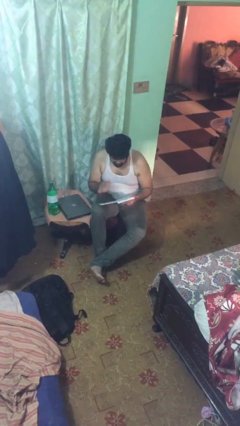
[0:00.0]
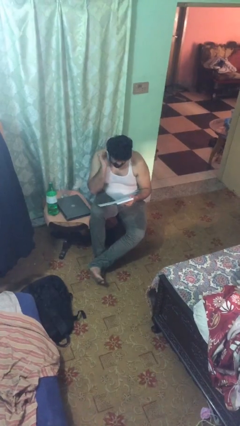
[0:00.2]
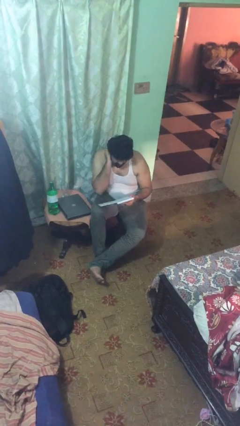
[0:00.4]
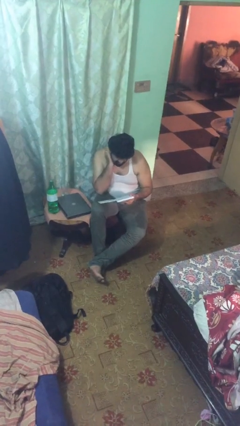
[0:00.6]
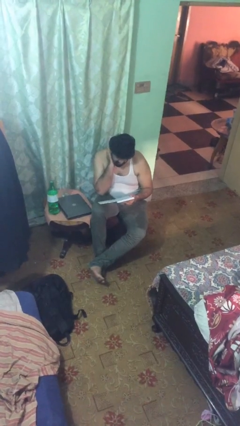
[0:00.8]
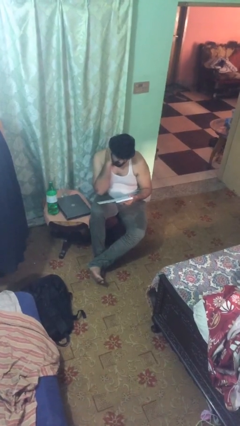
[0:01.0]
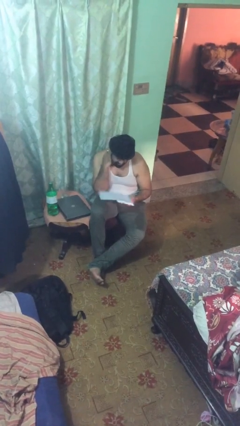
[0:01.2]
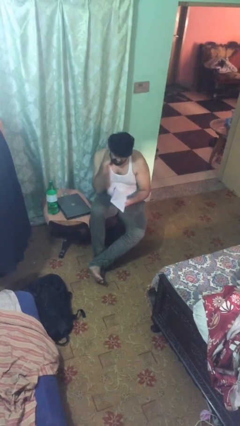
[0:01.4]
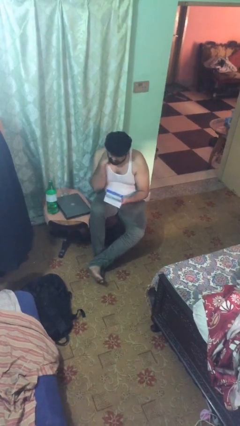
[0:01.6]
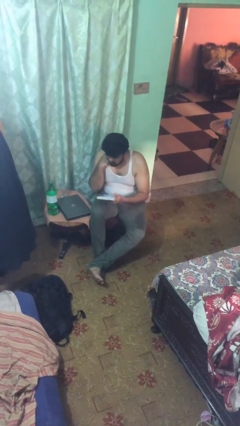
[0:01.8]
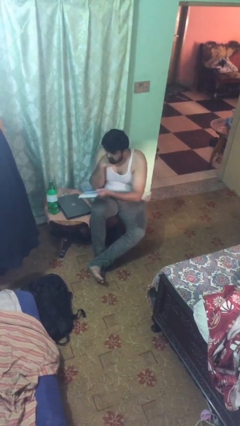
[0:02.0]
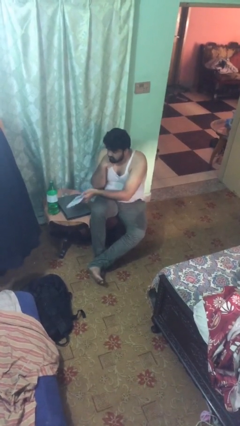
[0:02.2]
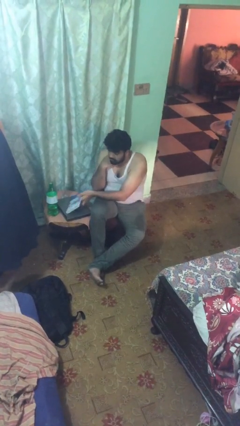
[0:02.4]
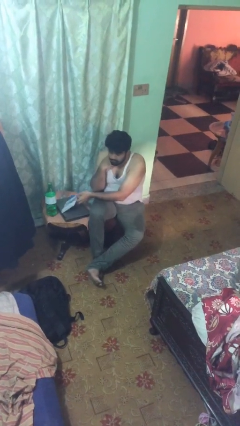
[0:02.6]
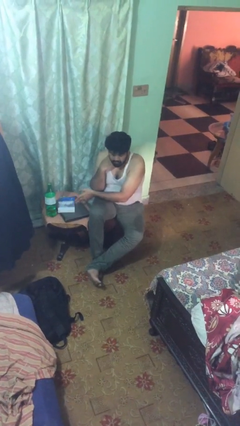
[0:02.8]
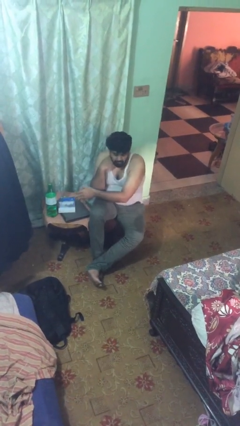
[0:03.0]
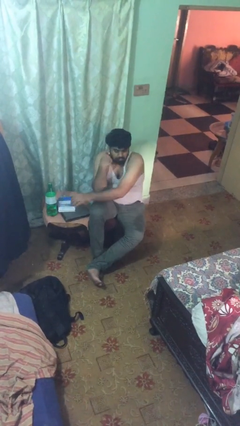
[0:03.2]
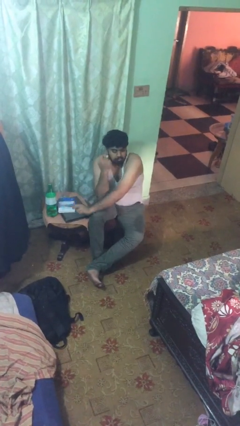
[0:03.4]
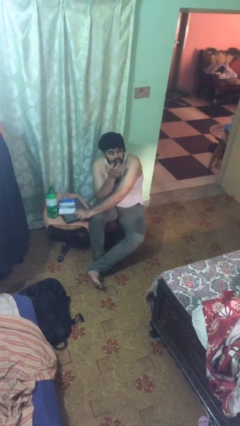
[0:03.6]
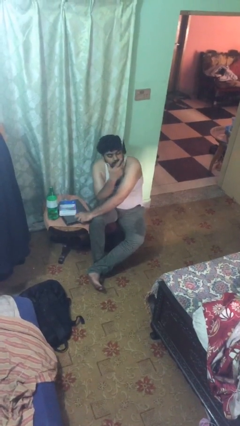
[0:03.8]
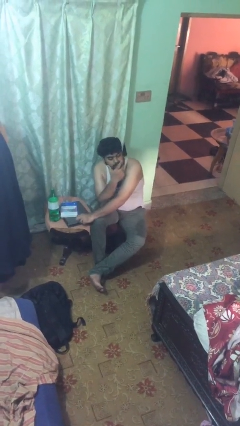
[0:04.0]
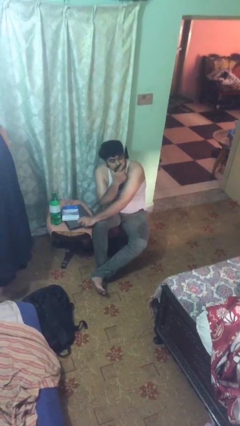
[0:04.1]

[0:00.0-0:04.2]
person puts down object on table

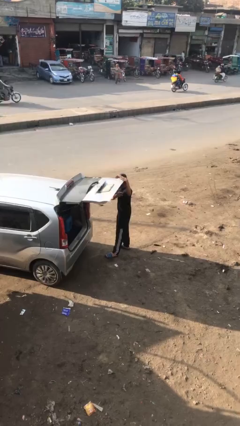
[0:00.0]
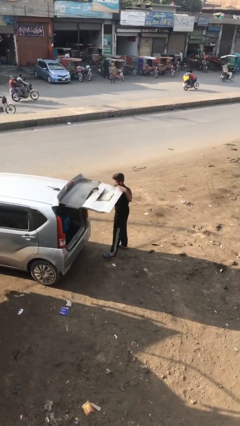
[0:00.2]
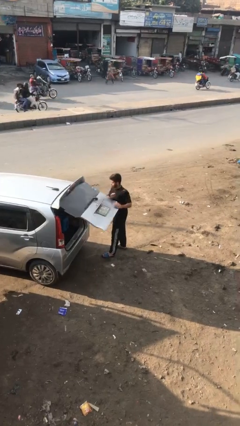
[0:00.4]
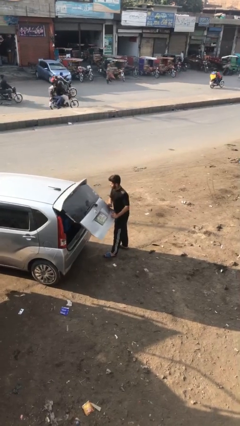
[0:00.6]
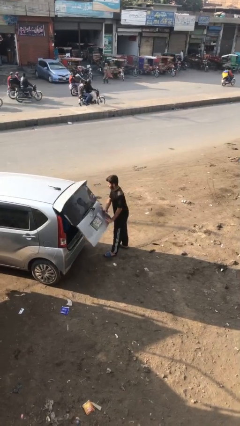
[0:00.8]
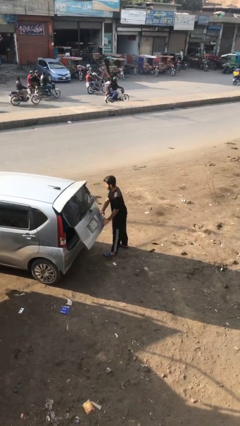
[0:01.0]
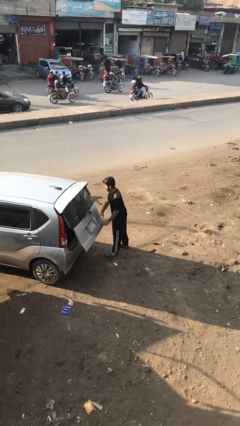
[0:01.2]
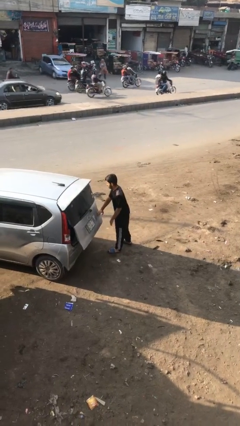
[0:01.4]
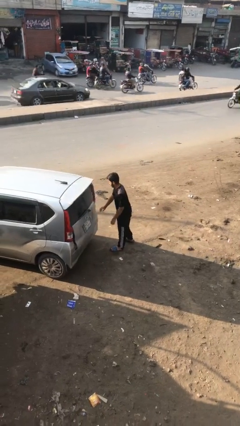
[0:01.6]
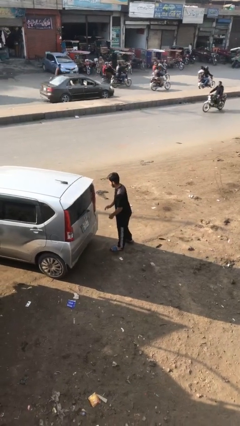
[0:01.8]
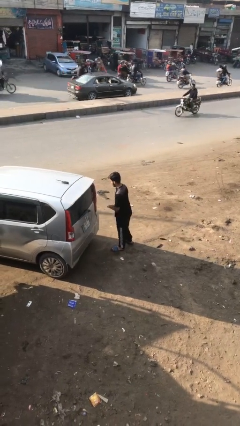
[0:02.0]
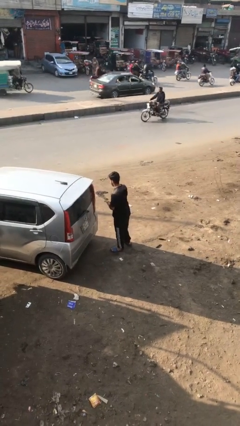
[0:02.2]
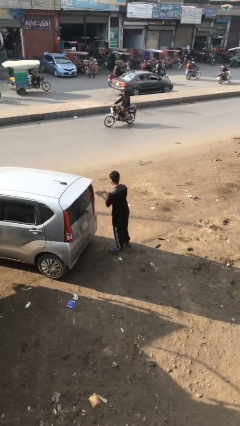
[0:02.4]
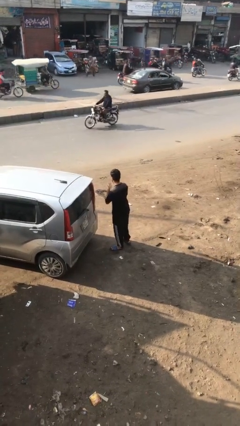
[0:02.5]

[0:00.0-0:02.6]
person closes car trunk

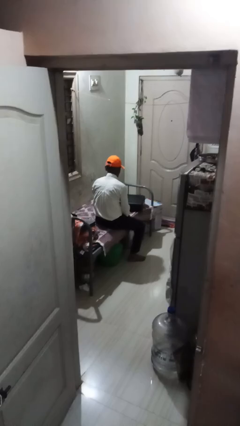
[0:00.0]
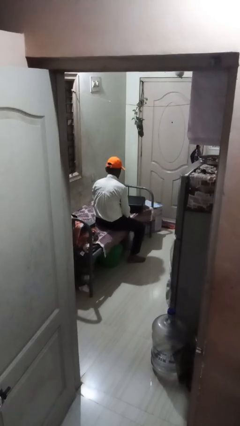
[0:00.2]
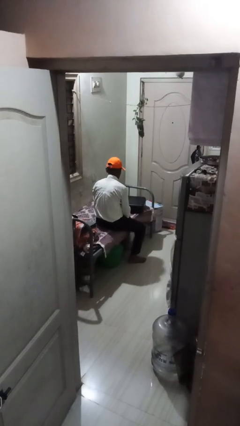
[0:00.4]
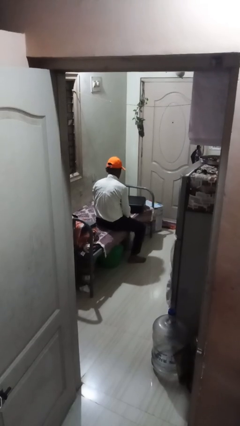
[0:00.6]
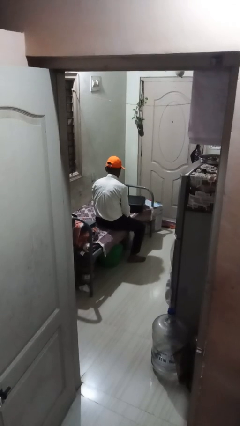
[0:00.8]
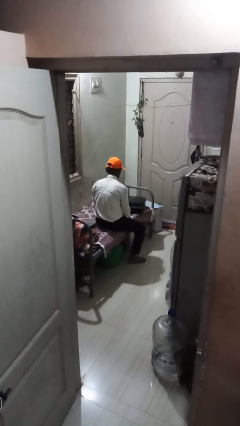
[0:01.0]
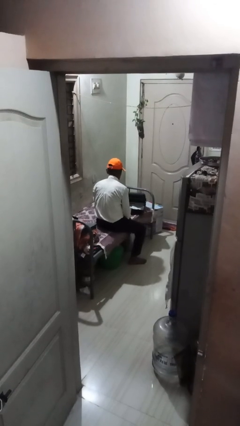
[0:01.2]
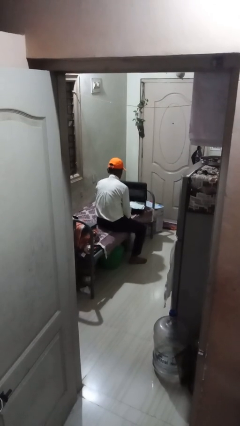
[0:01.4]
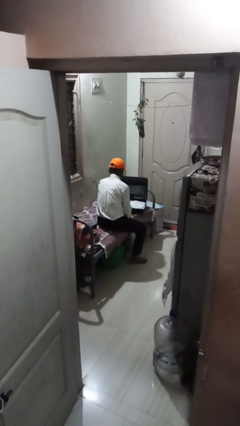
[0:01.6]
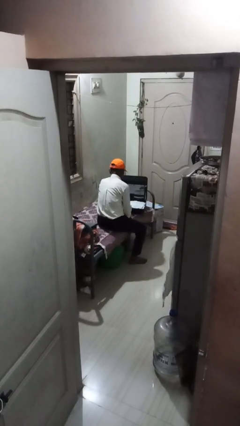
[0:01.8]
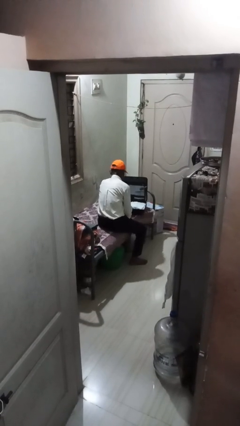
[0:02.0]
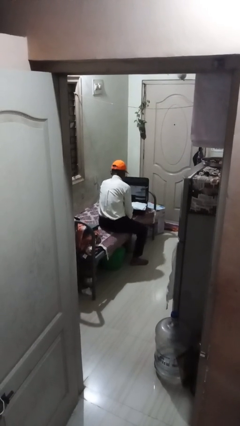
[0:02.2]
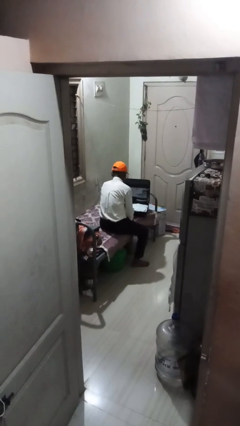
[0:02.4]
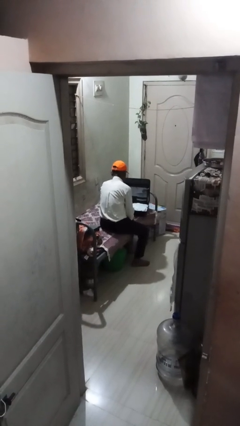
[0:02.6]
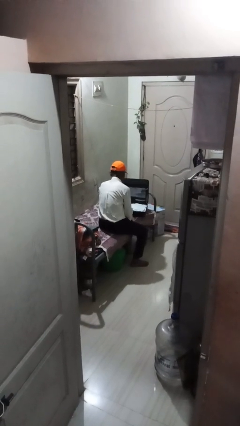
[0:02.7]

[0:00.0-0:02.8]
person opens suitcase

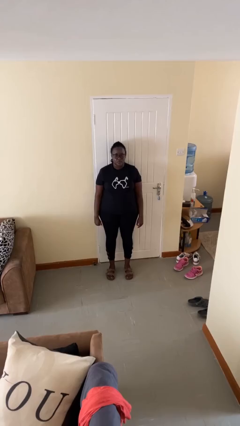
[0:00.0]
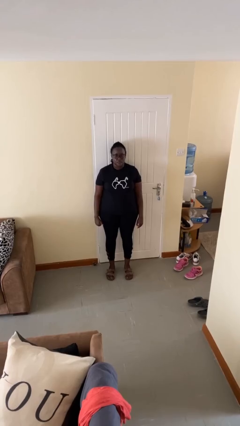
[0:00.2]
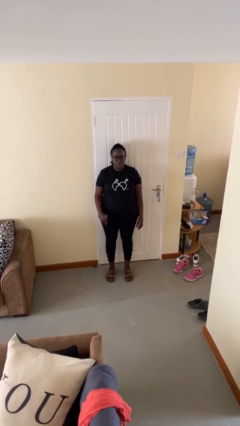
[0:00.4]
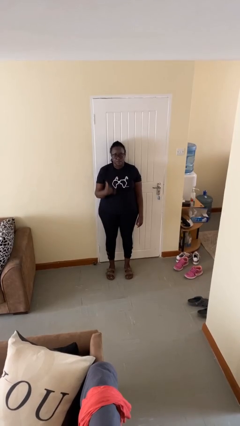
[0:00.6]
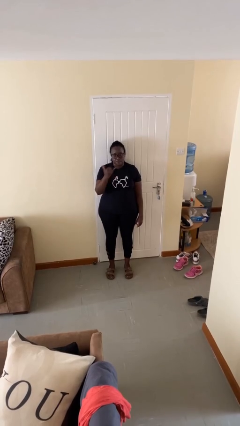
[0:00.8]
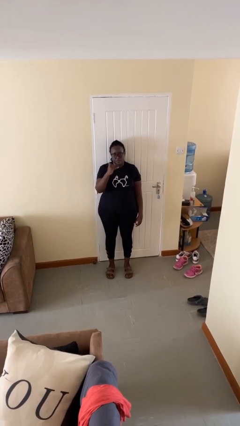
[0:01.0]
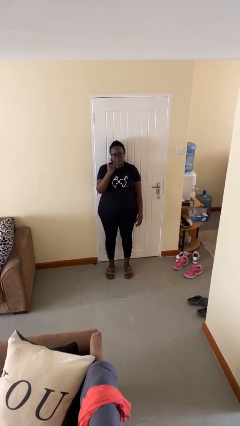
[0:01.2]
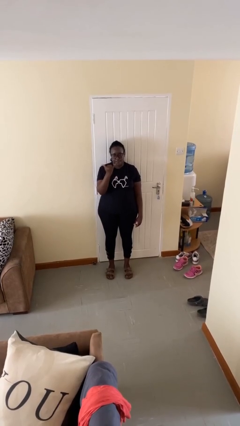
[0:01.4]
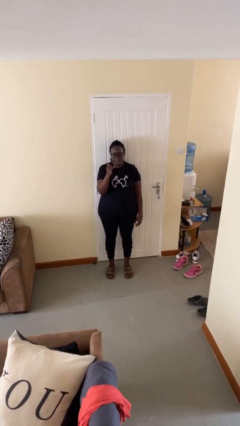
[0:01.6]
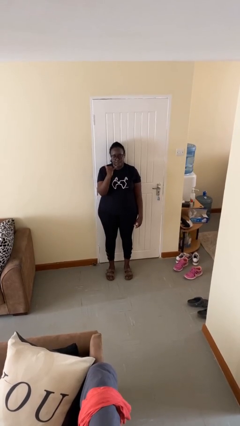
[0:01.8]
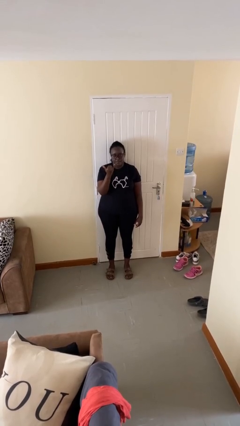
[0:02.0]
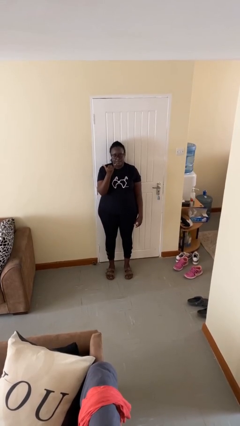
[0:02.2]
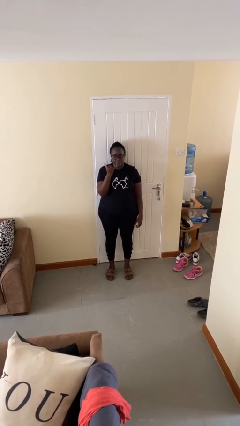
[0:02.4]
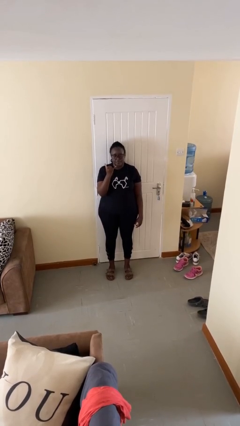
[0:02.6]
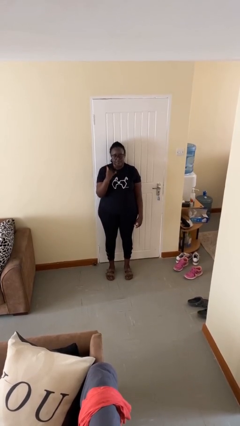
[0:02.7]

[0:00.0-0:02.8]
person gestures hang loose

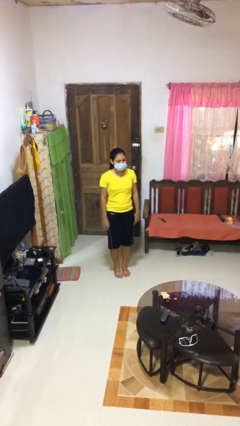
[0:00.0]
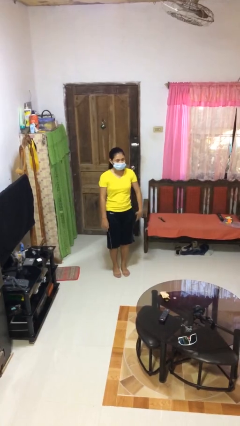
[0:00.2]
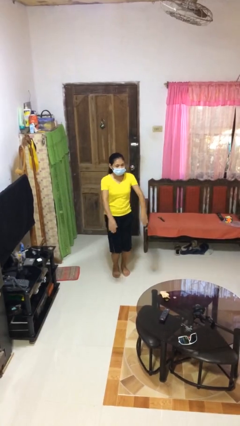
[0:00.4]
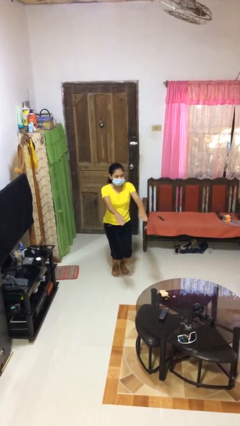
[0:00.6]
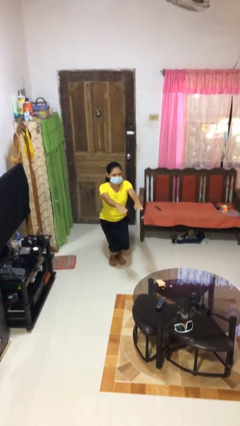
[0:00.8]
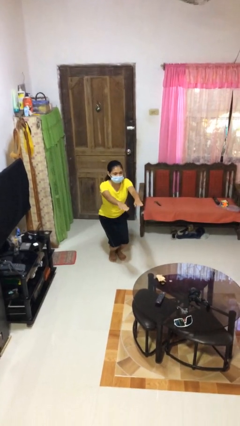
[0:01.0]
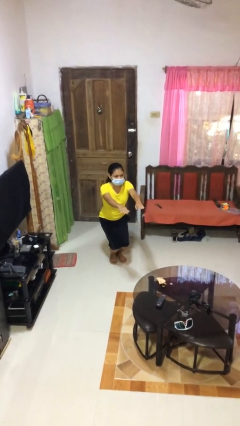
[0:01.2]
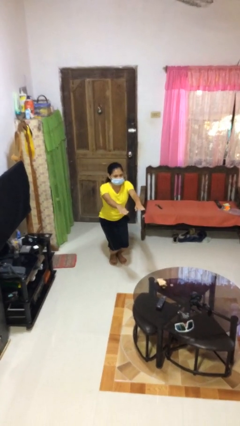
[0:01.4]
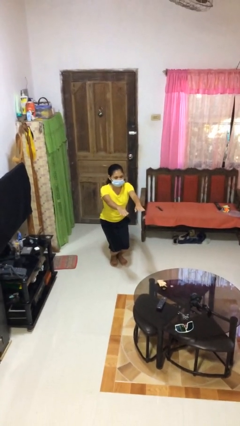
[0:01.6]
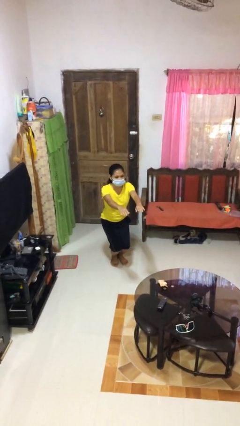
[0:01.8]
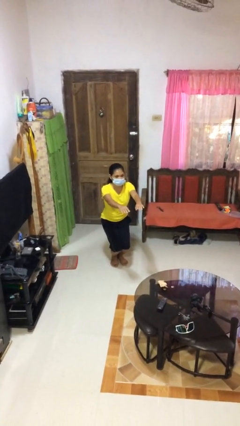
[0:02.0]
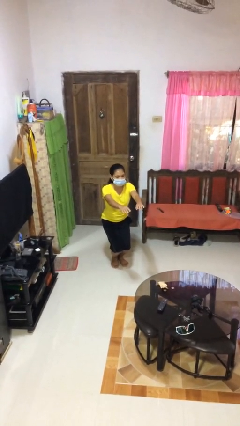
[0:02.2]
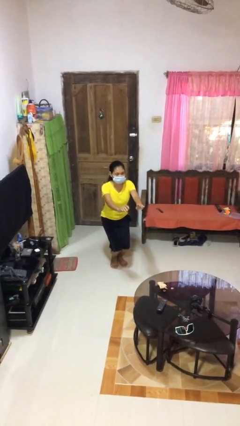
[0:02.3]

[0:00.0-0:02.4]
person squats

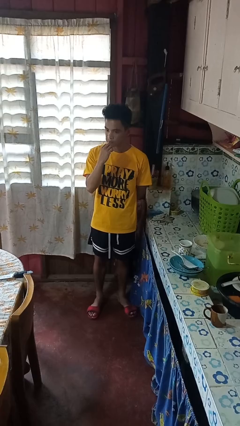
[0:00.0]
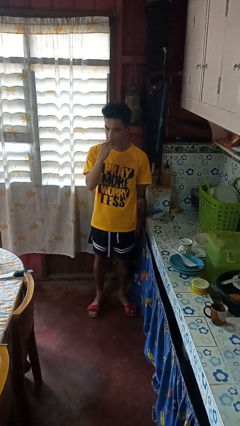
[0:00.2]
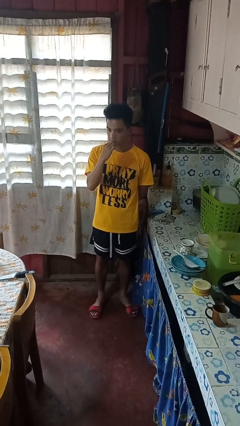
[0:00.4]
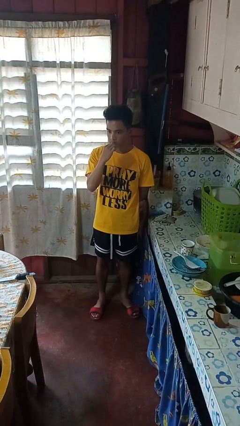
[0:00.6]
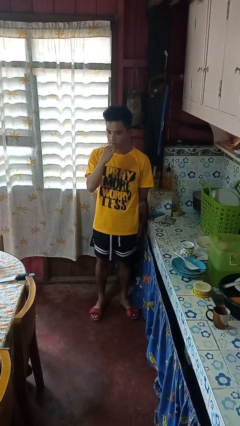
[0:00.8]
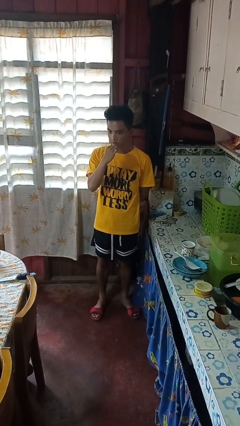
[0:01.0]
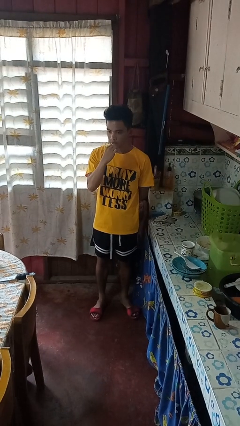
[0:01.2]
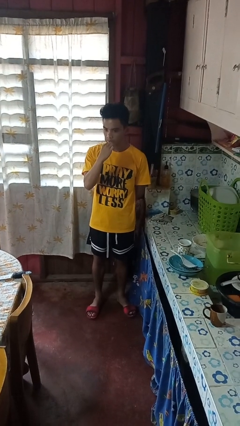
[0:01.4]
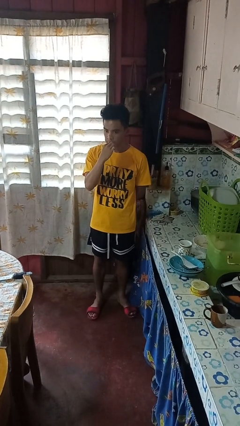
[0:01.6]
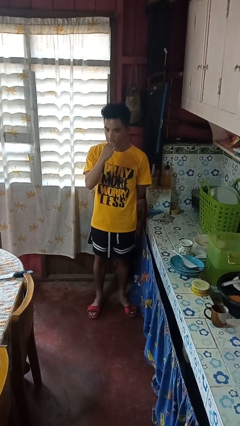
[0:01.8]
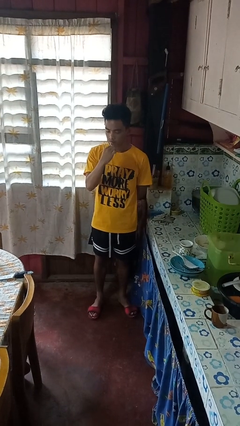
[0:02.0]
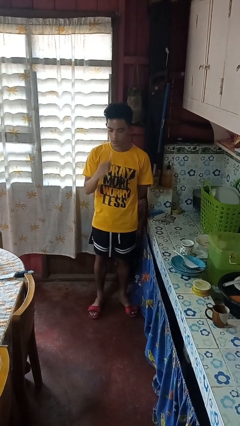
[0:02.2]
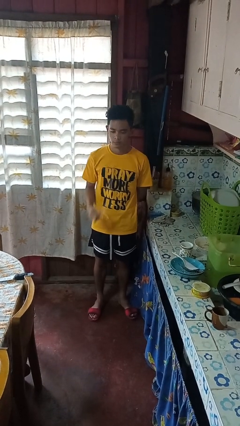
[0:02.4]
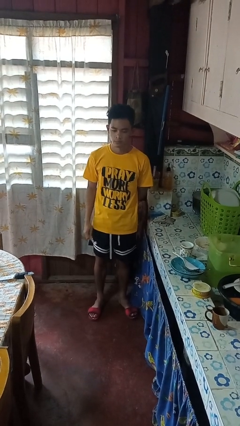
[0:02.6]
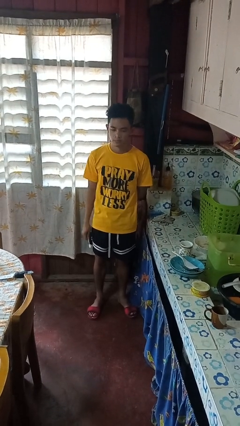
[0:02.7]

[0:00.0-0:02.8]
person brushes teeth
